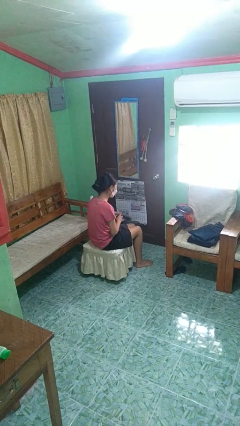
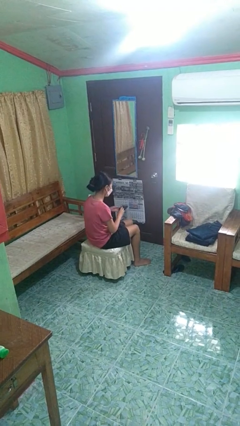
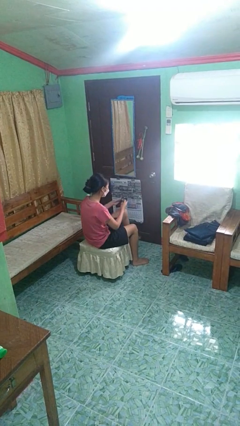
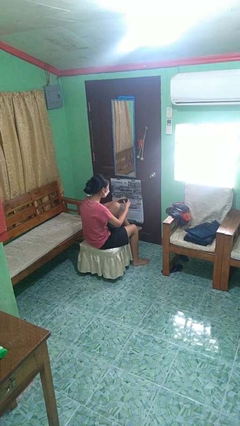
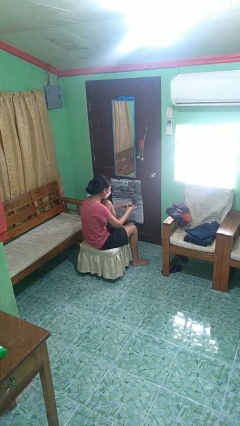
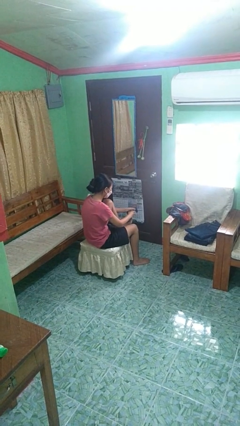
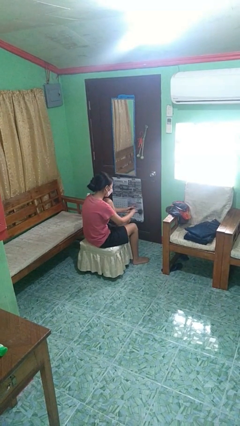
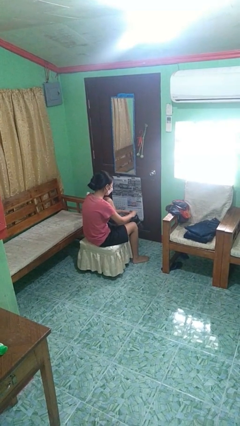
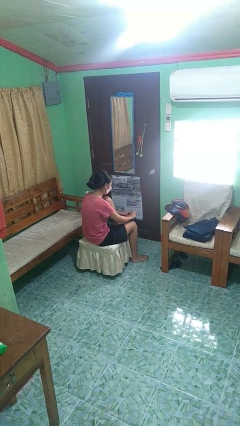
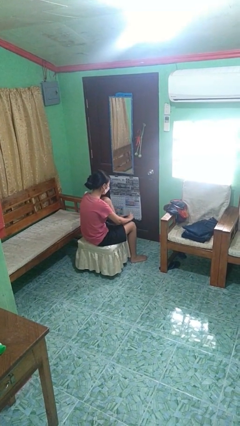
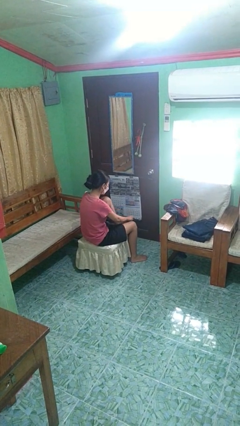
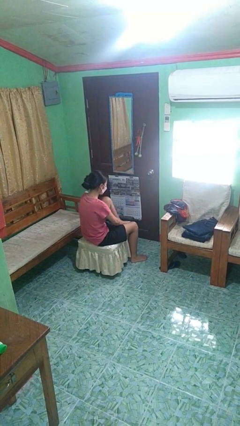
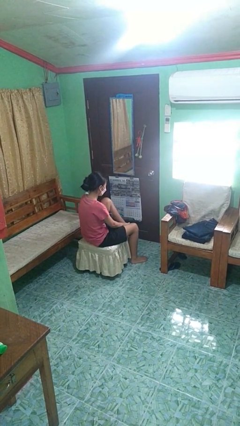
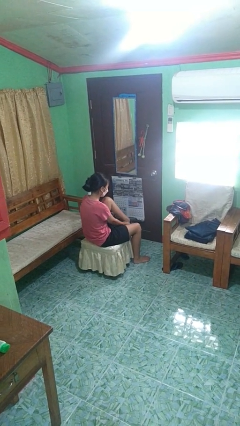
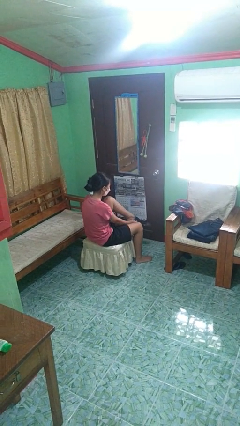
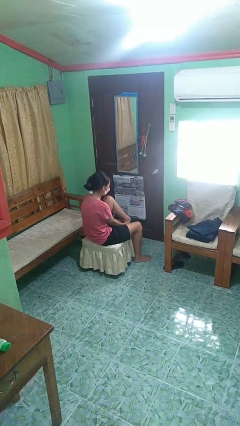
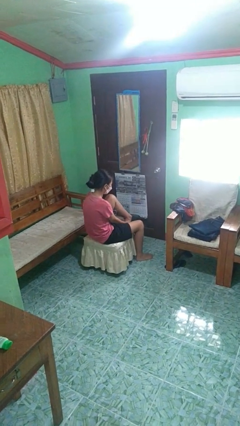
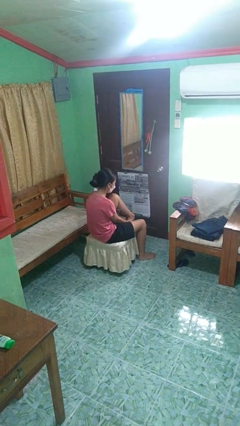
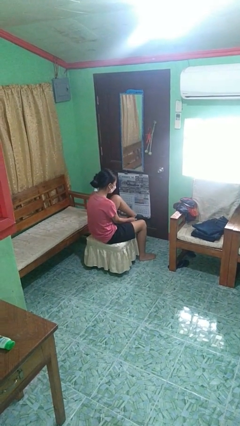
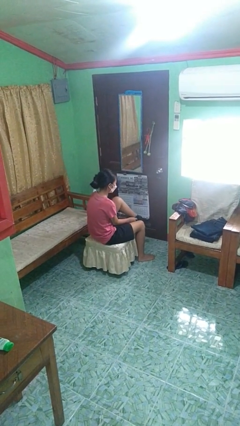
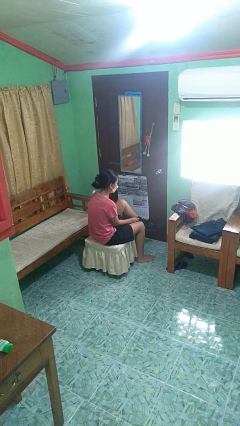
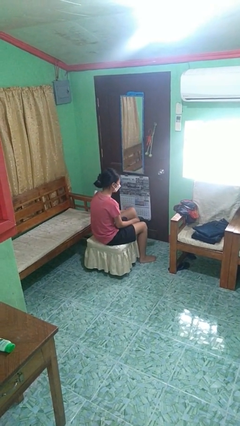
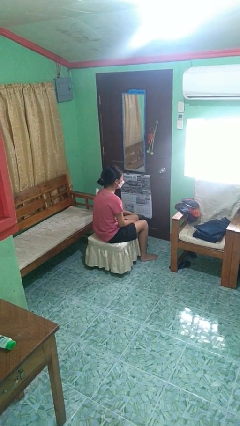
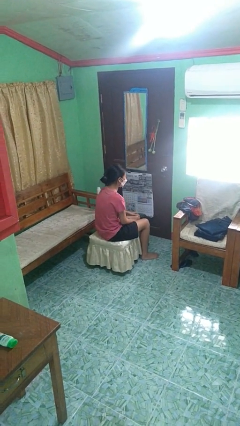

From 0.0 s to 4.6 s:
person puts on socks

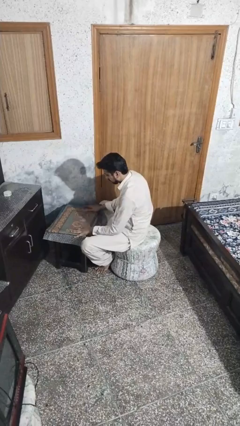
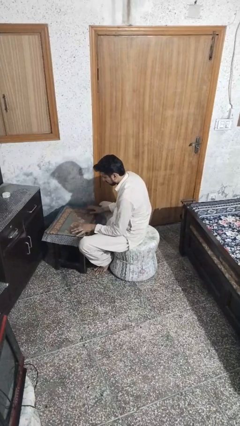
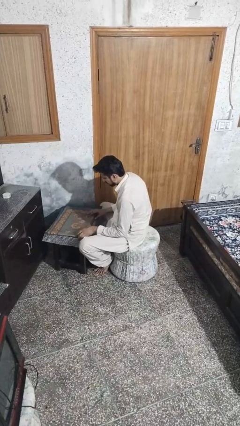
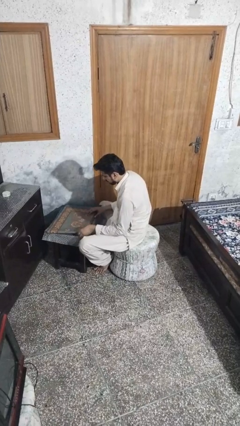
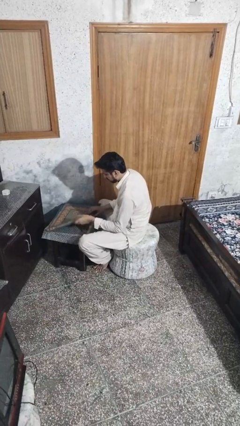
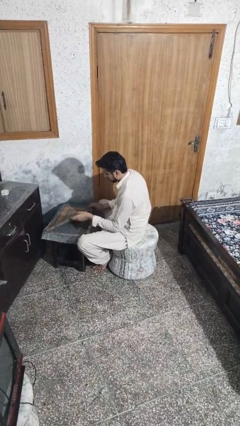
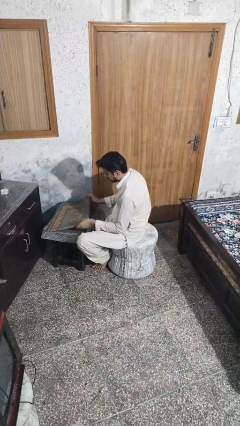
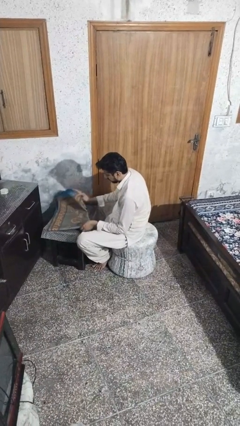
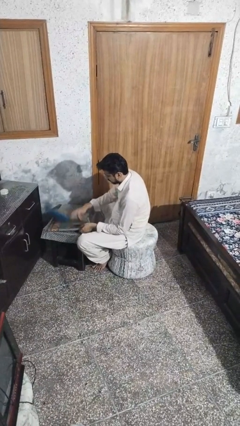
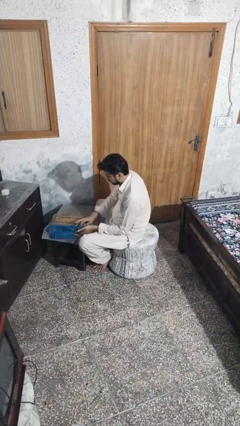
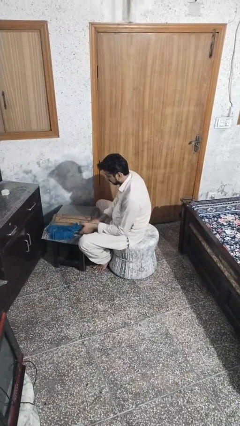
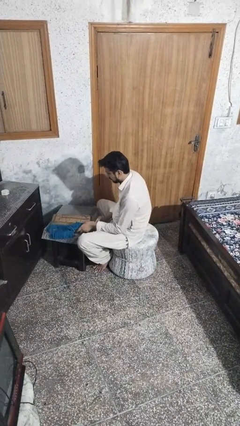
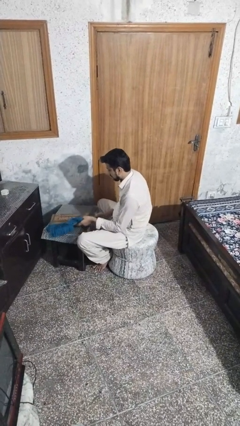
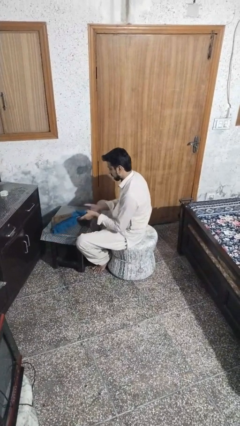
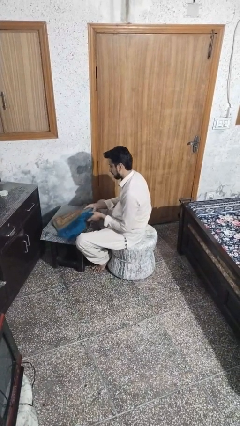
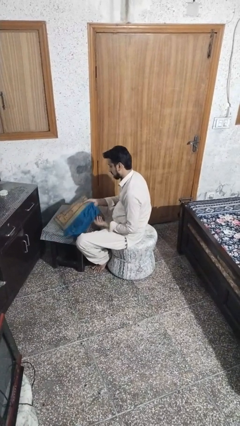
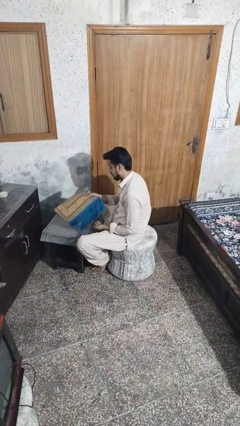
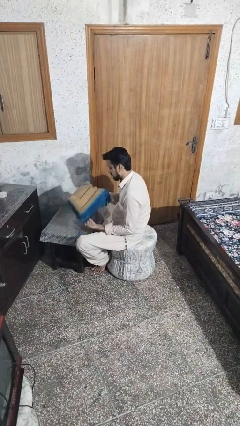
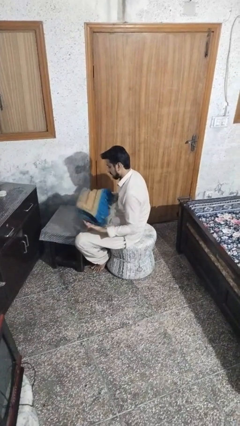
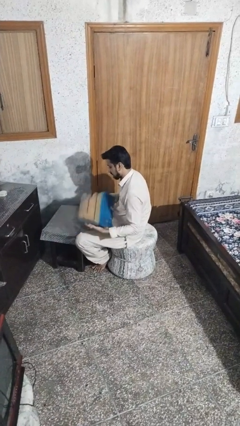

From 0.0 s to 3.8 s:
person folds tablecloth

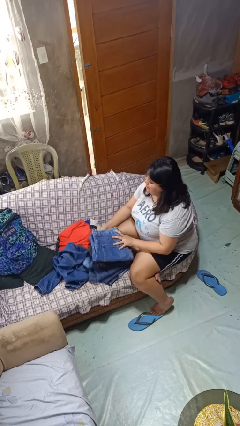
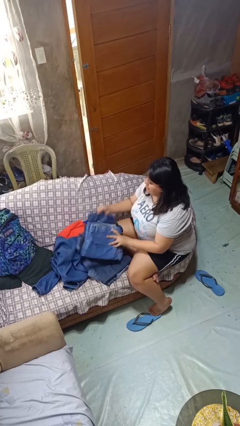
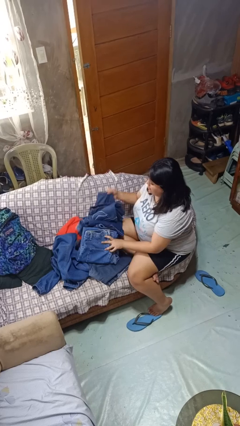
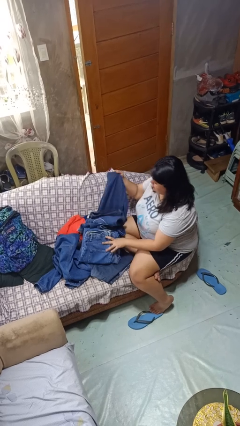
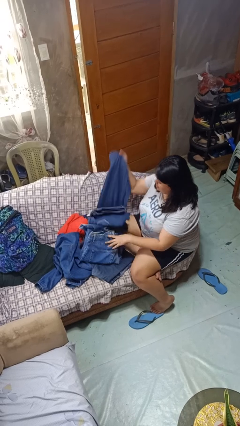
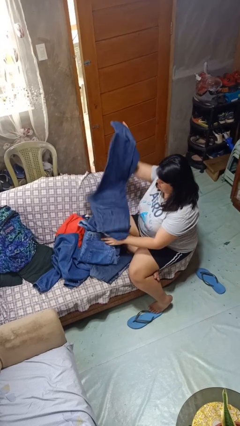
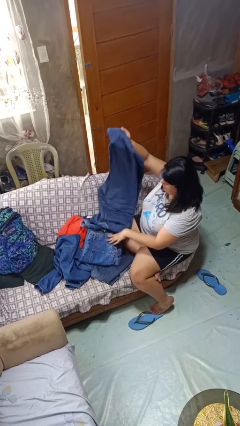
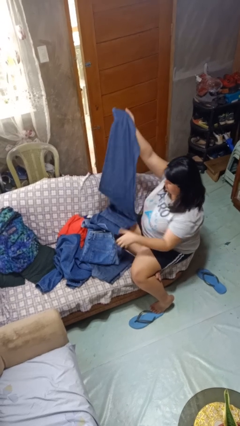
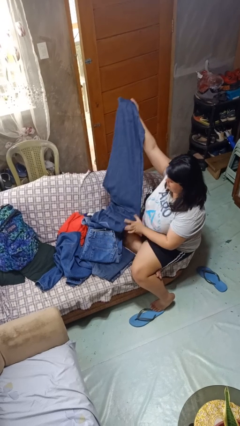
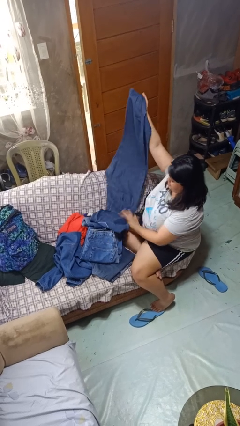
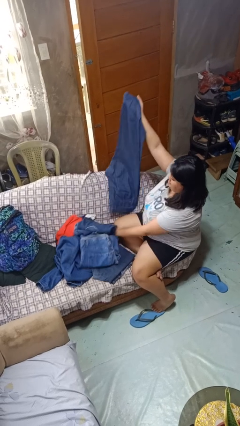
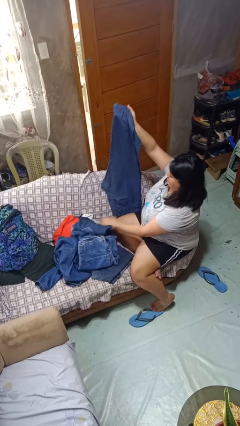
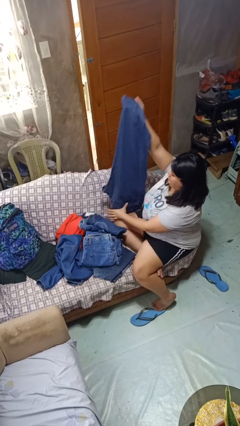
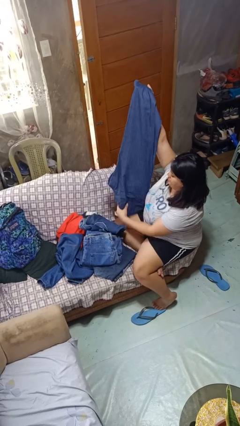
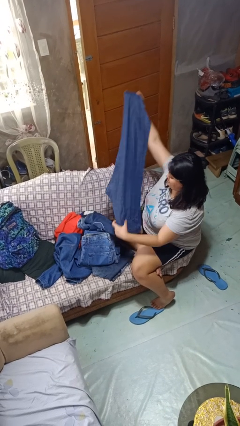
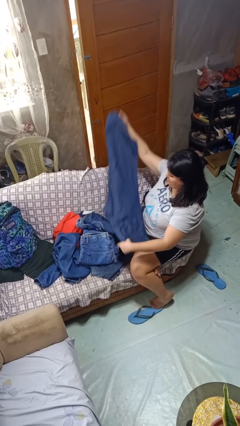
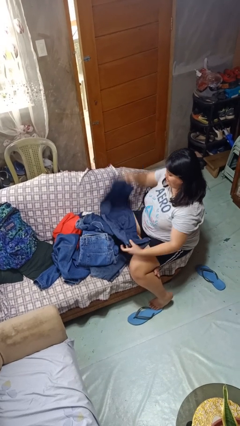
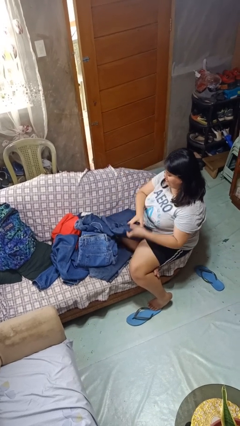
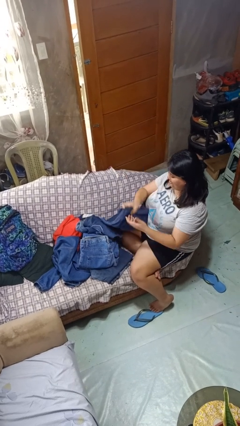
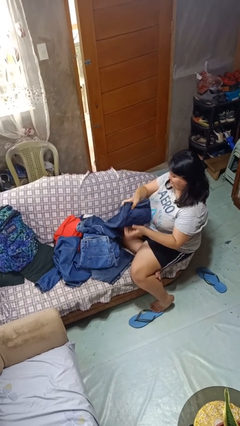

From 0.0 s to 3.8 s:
person folds pants

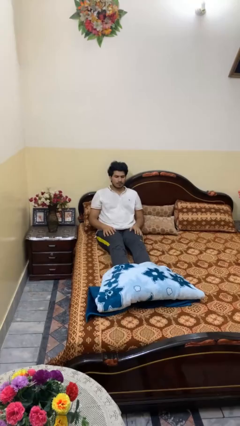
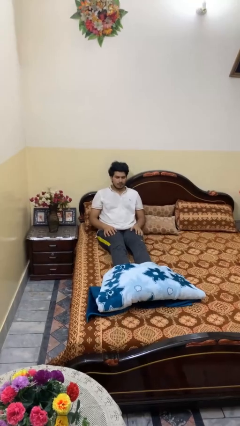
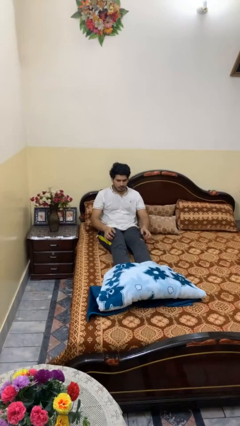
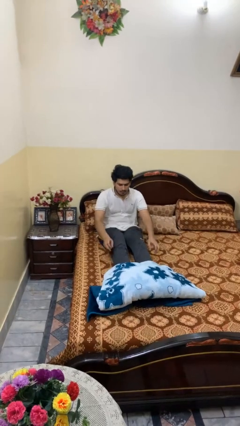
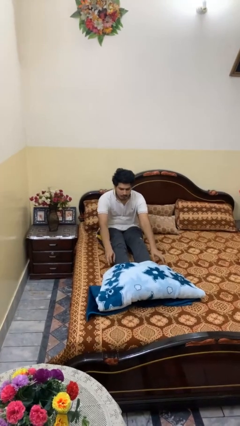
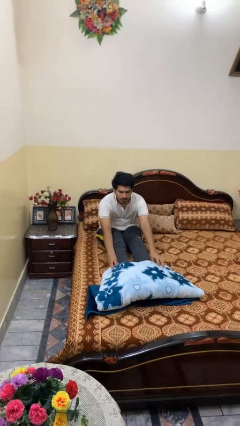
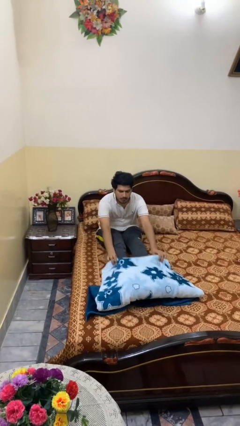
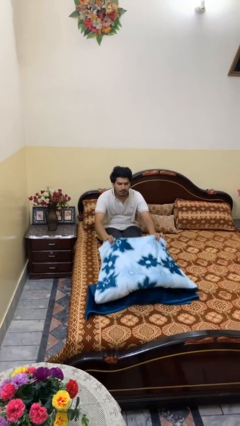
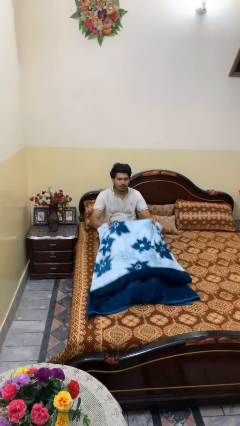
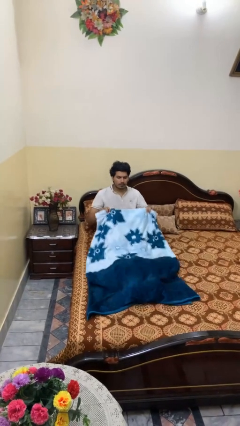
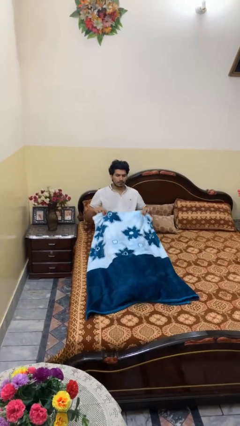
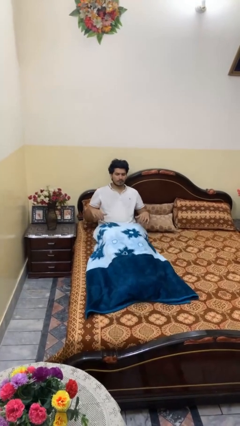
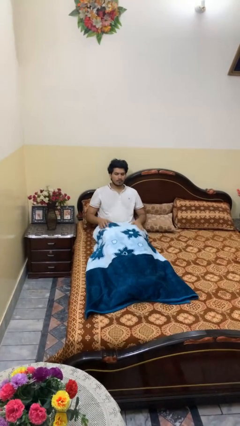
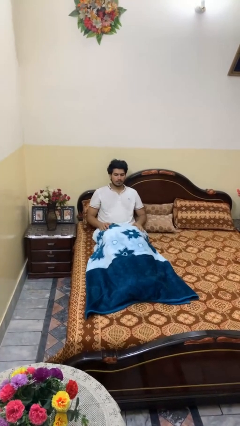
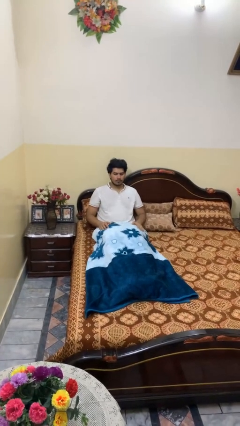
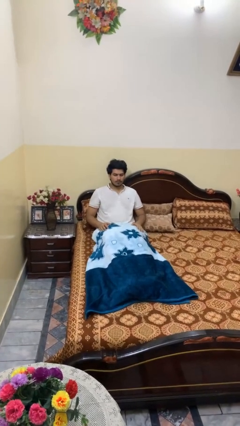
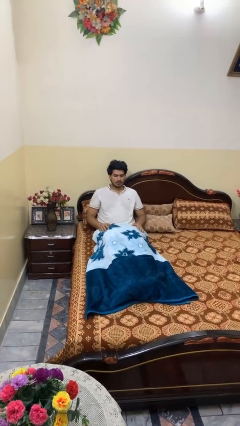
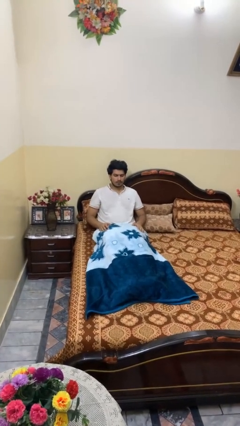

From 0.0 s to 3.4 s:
person covers with blanket

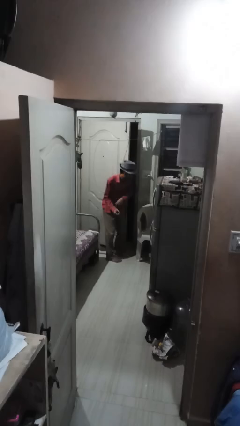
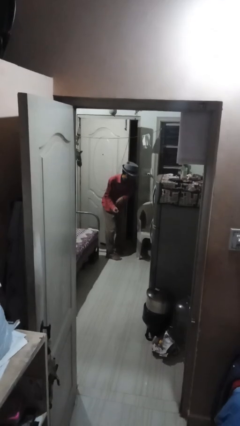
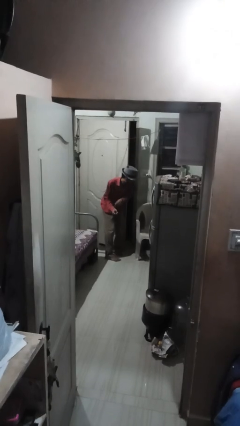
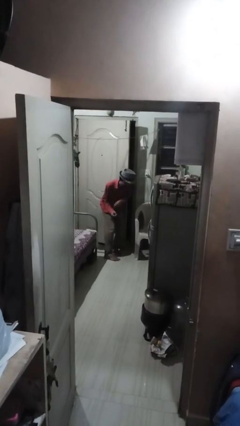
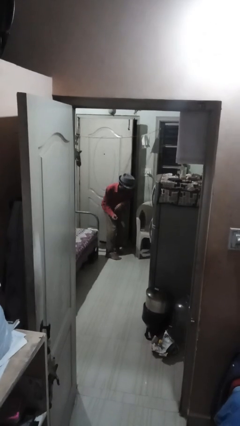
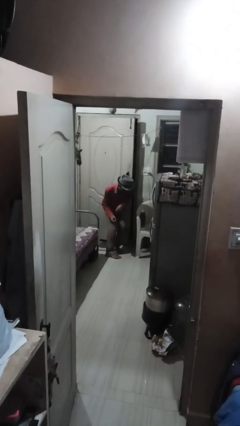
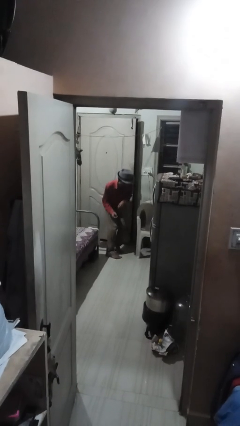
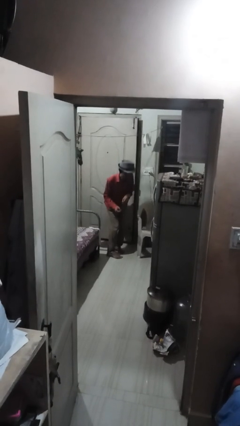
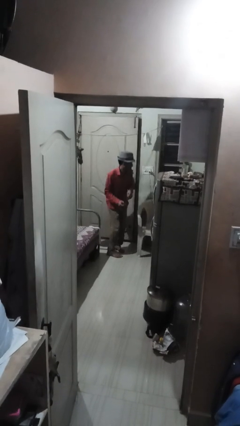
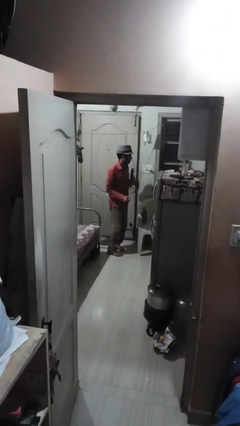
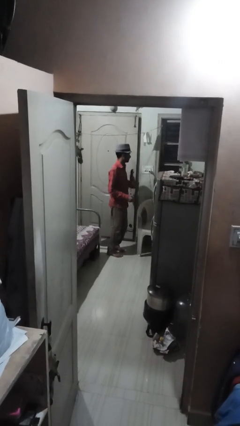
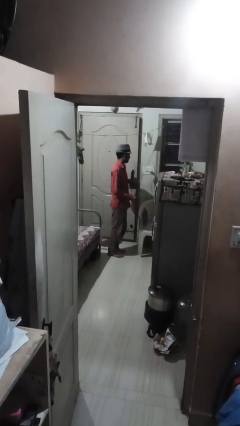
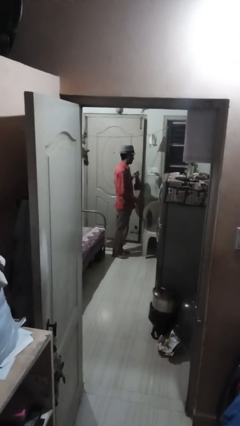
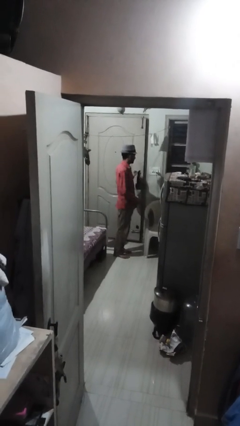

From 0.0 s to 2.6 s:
person closes door with hip
